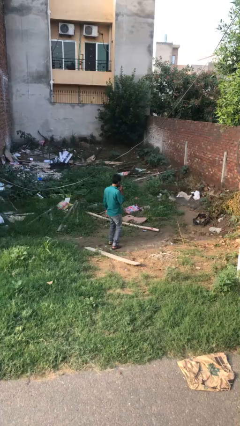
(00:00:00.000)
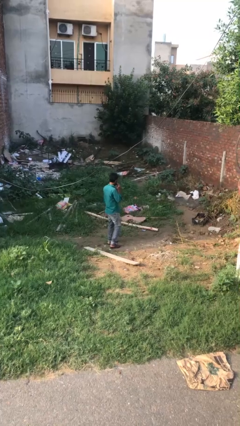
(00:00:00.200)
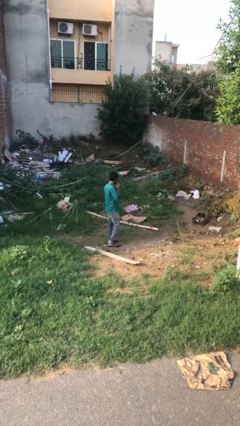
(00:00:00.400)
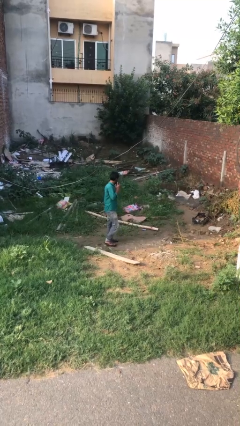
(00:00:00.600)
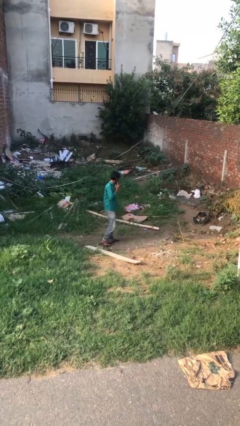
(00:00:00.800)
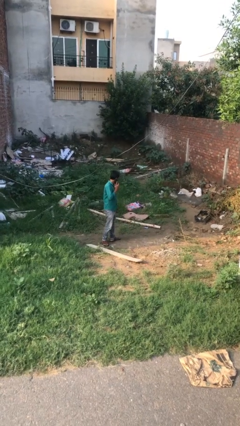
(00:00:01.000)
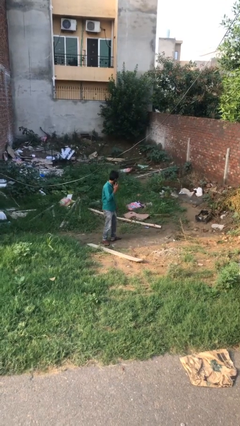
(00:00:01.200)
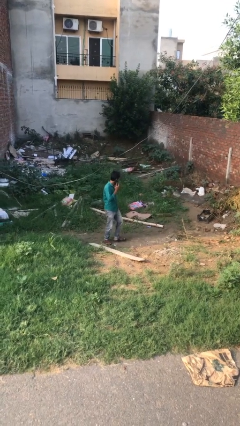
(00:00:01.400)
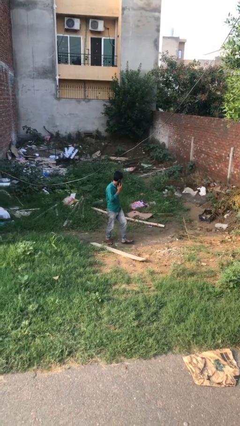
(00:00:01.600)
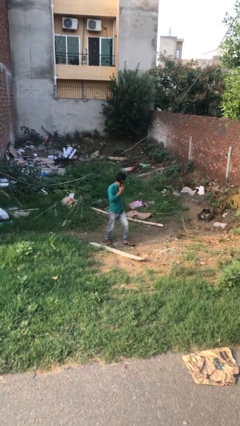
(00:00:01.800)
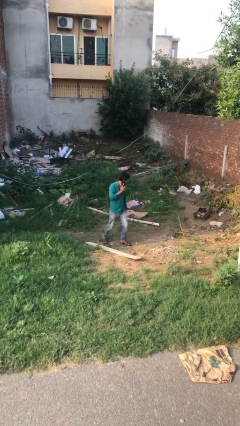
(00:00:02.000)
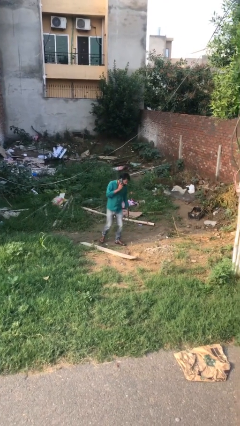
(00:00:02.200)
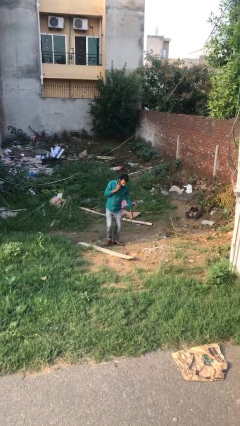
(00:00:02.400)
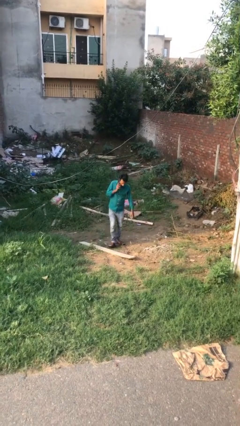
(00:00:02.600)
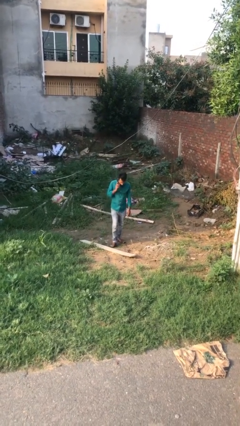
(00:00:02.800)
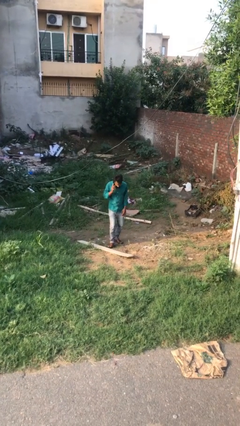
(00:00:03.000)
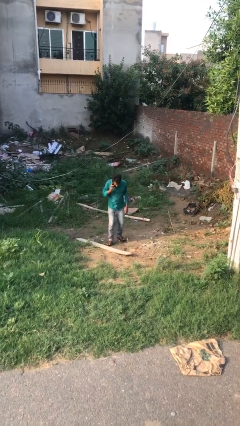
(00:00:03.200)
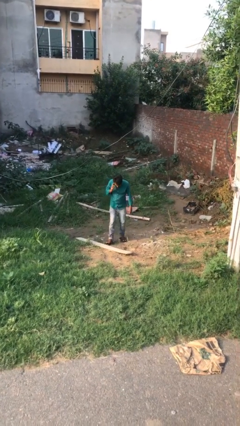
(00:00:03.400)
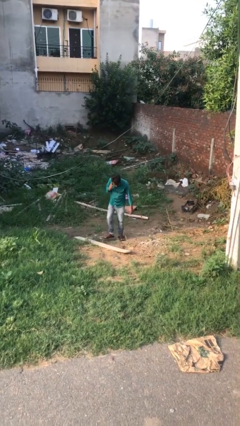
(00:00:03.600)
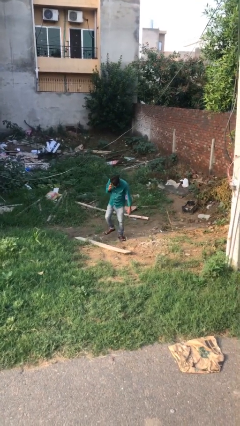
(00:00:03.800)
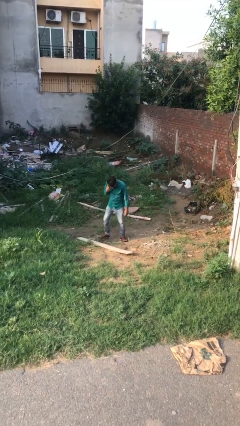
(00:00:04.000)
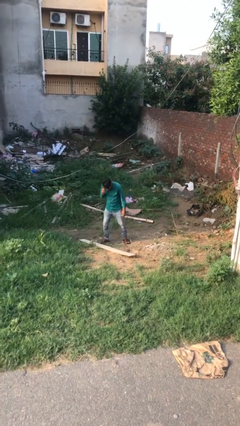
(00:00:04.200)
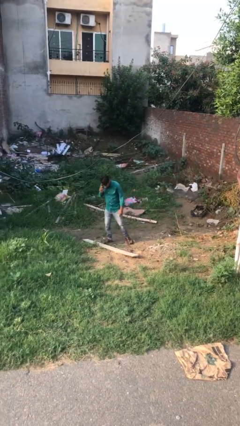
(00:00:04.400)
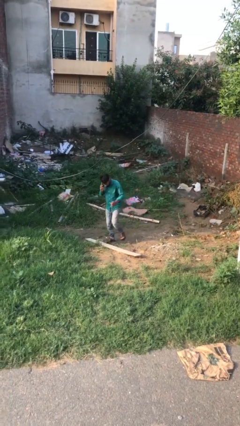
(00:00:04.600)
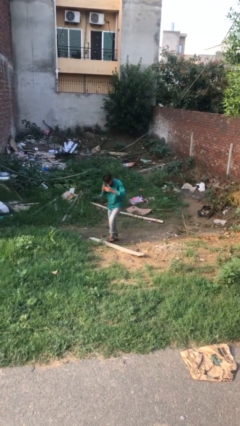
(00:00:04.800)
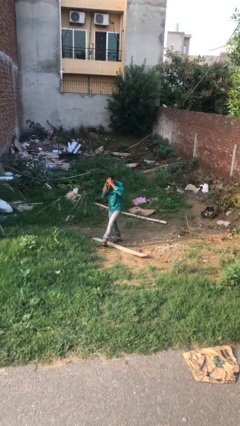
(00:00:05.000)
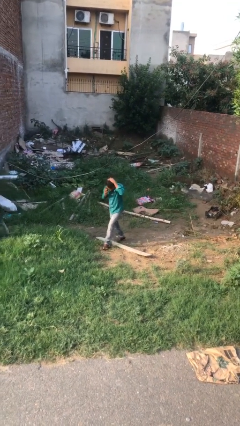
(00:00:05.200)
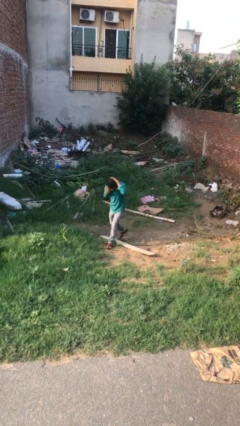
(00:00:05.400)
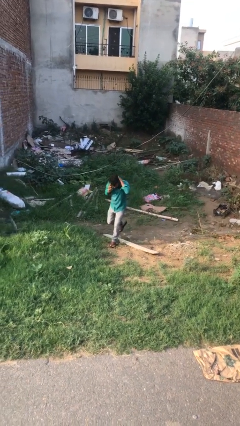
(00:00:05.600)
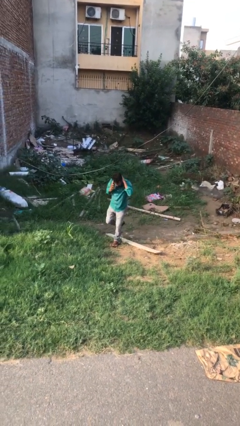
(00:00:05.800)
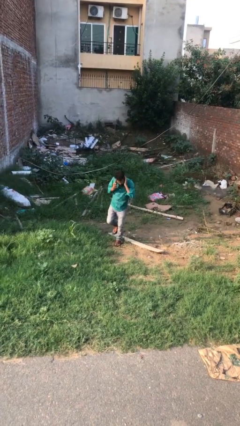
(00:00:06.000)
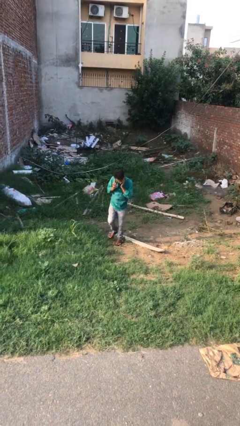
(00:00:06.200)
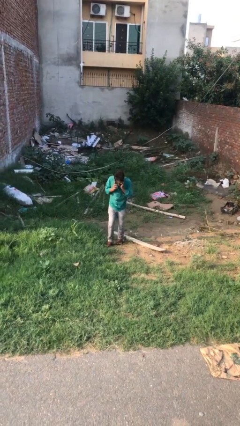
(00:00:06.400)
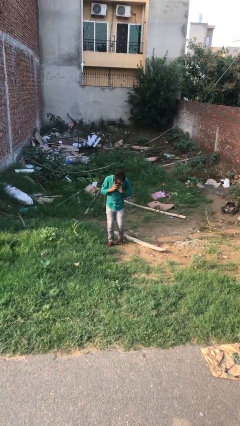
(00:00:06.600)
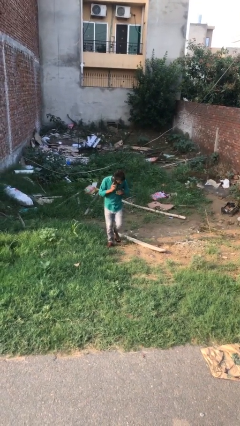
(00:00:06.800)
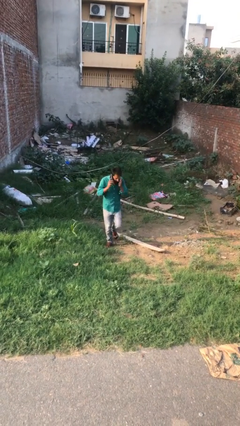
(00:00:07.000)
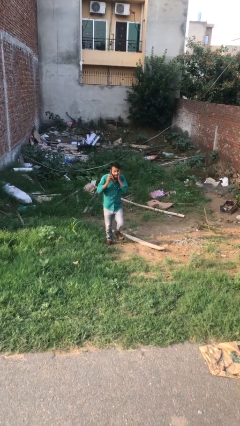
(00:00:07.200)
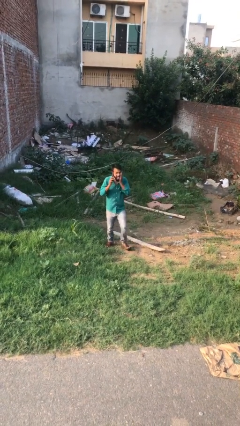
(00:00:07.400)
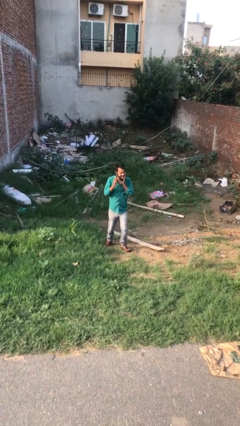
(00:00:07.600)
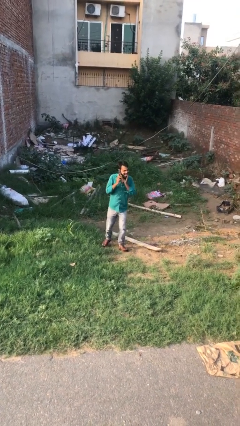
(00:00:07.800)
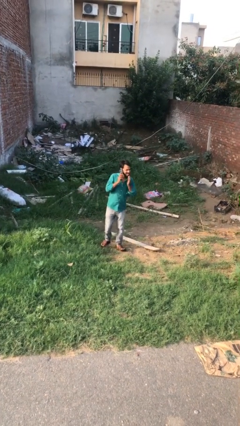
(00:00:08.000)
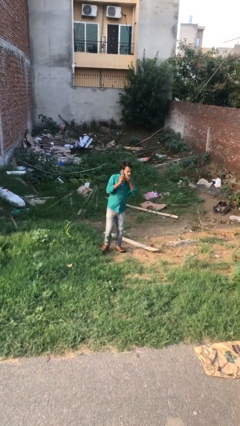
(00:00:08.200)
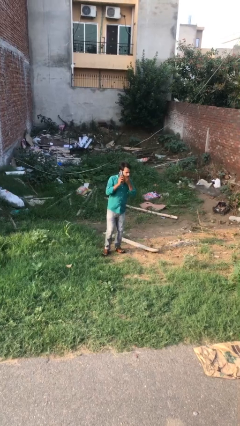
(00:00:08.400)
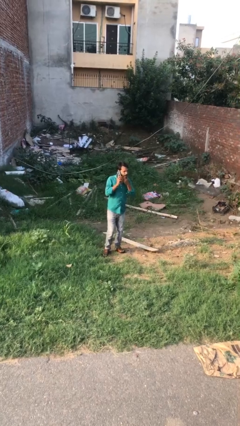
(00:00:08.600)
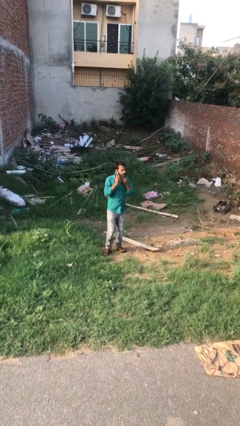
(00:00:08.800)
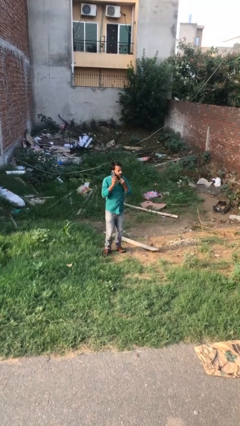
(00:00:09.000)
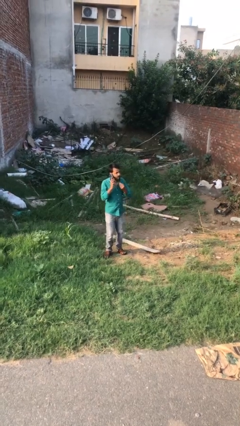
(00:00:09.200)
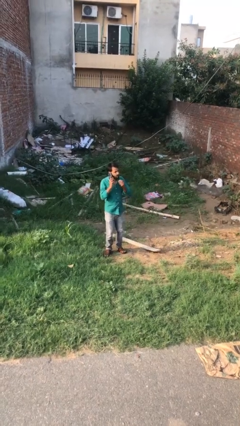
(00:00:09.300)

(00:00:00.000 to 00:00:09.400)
person talks on phone

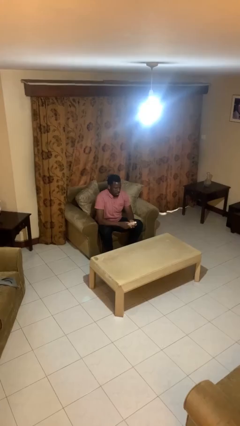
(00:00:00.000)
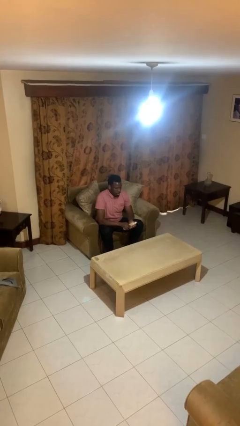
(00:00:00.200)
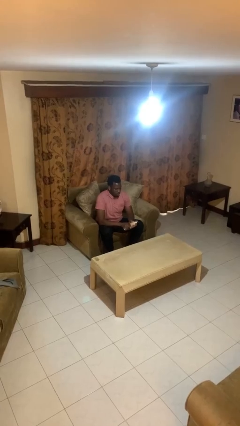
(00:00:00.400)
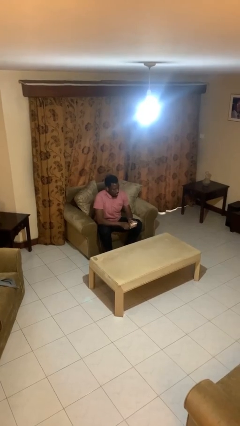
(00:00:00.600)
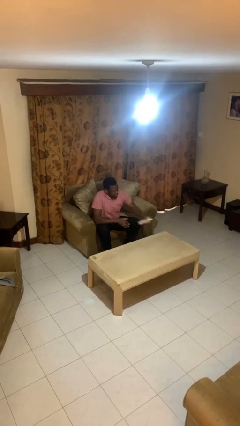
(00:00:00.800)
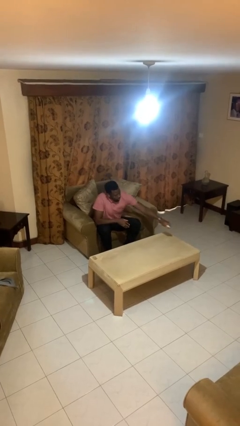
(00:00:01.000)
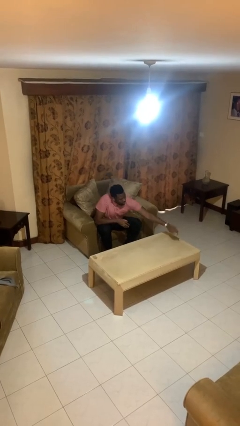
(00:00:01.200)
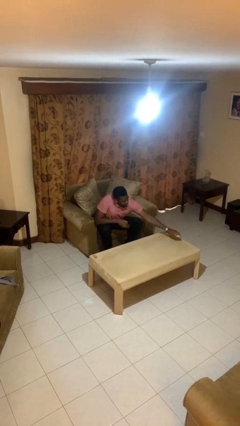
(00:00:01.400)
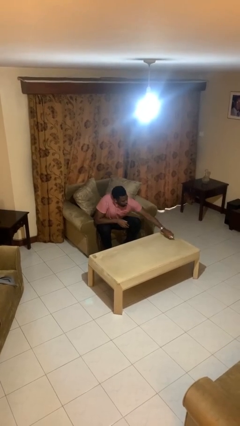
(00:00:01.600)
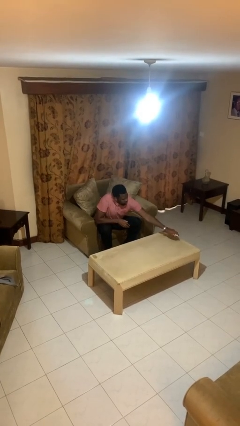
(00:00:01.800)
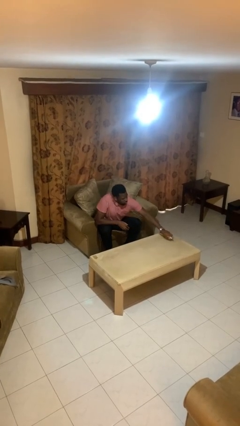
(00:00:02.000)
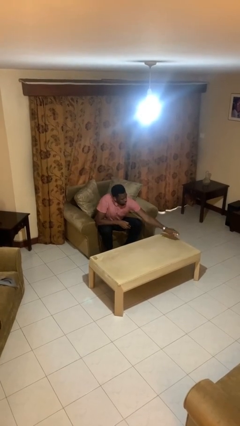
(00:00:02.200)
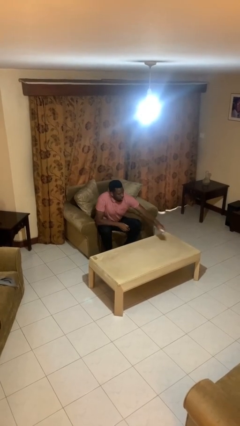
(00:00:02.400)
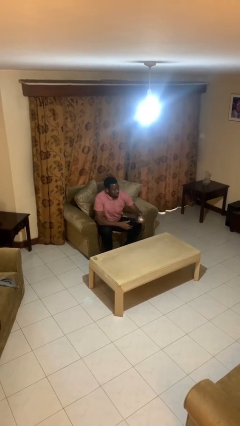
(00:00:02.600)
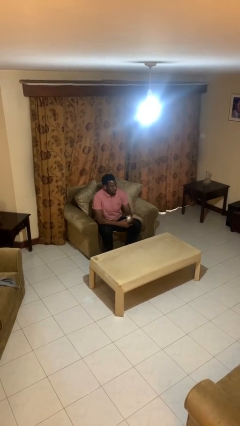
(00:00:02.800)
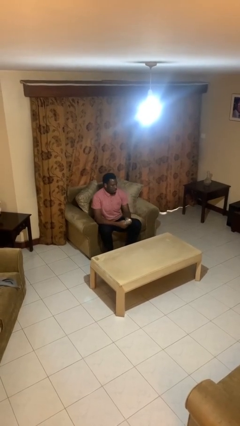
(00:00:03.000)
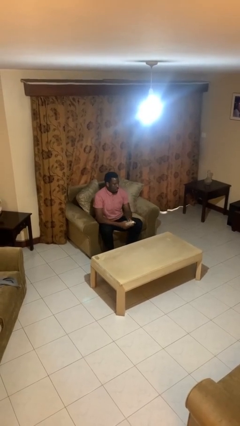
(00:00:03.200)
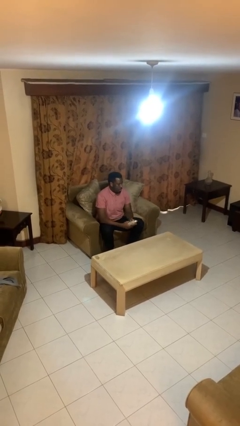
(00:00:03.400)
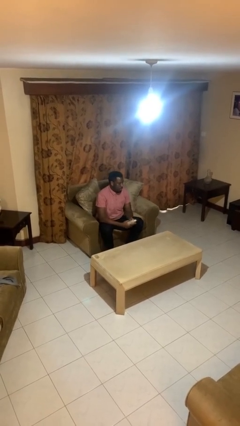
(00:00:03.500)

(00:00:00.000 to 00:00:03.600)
person sprays from bottle

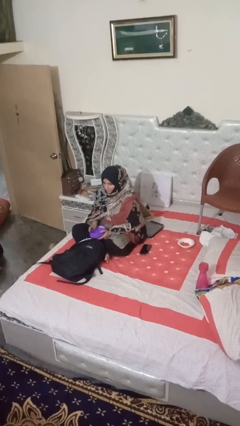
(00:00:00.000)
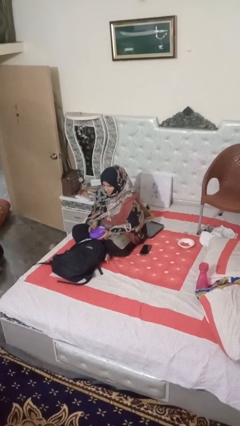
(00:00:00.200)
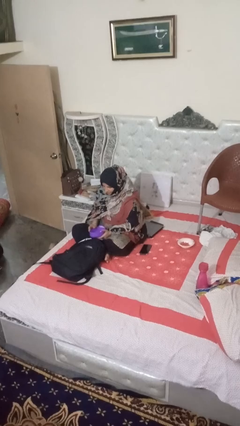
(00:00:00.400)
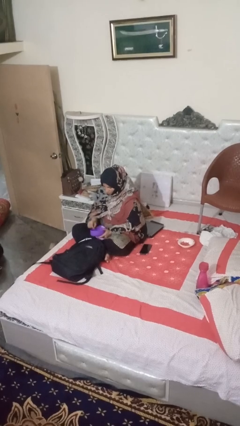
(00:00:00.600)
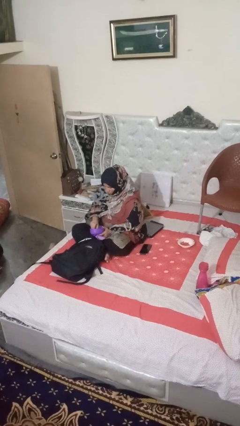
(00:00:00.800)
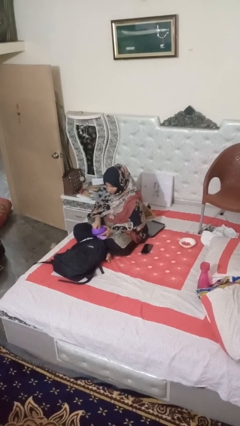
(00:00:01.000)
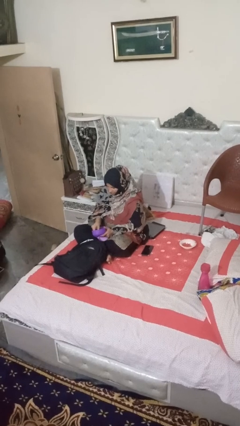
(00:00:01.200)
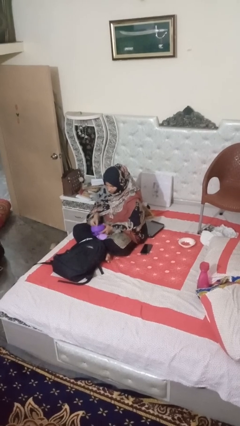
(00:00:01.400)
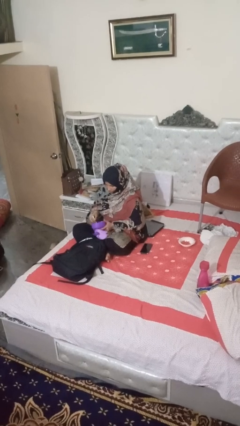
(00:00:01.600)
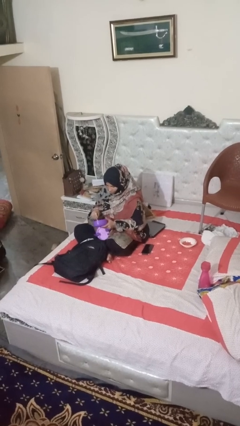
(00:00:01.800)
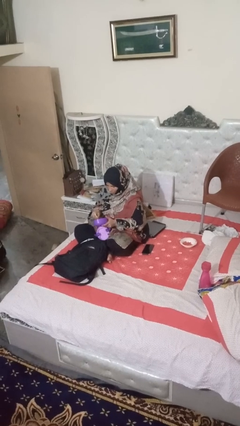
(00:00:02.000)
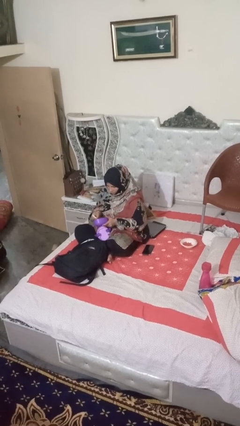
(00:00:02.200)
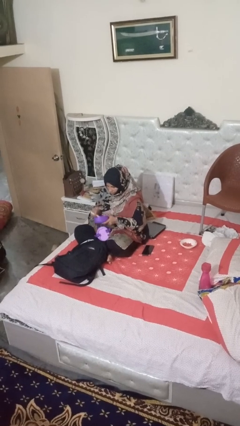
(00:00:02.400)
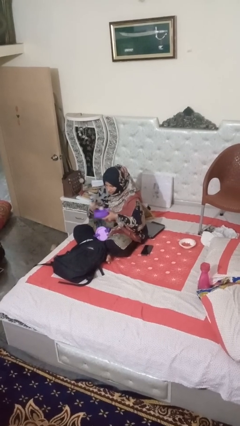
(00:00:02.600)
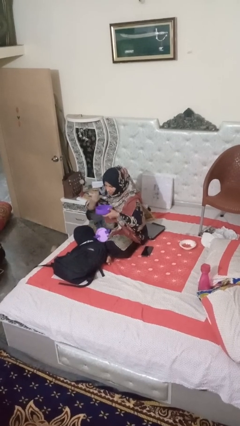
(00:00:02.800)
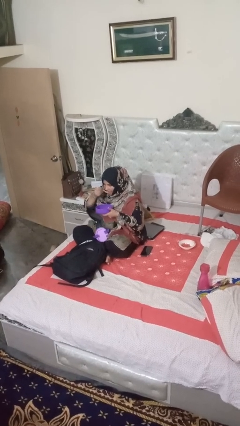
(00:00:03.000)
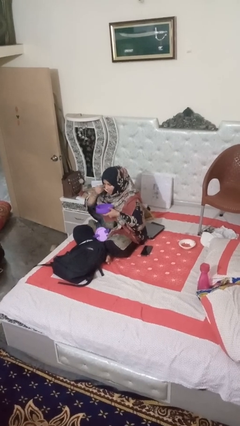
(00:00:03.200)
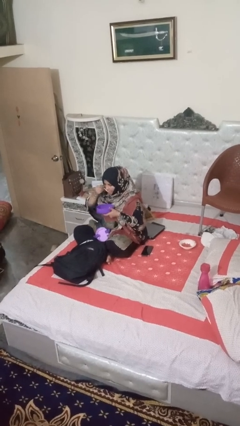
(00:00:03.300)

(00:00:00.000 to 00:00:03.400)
person eats snack from bag

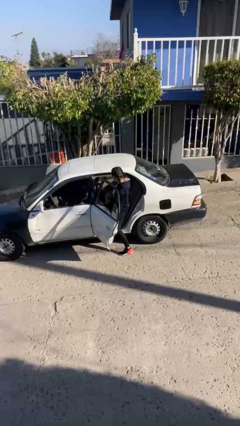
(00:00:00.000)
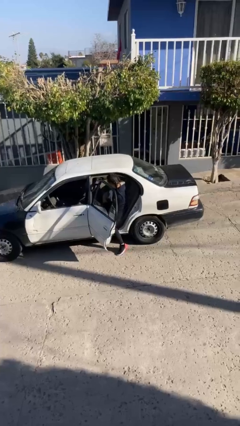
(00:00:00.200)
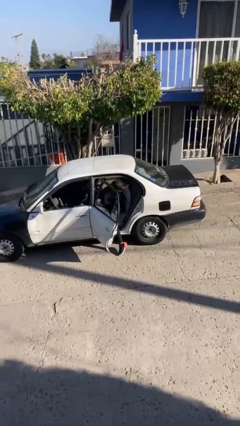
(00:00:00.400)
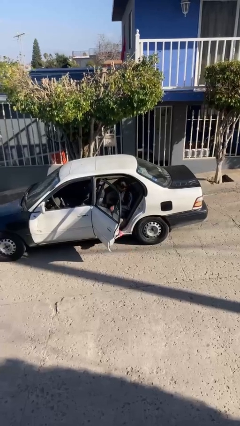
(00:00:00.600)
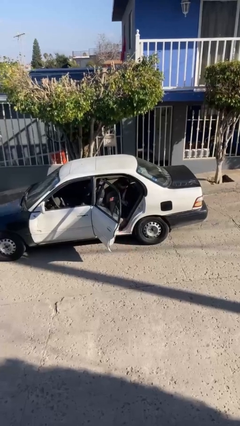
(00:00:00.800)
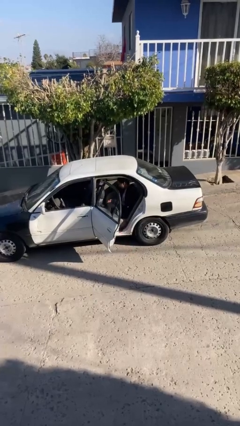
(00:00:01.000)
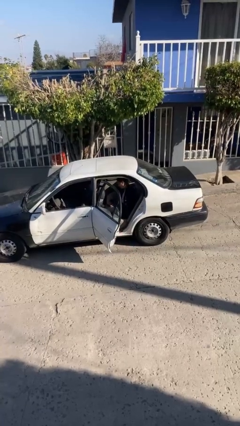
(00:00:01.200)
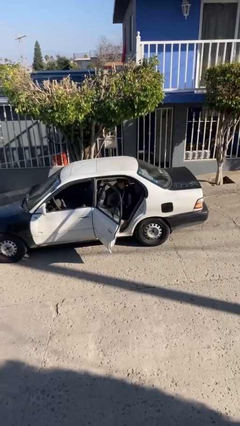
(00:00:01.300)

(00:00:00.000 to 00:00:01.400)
person enters car
